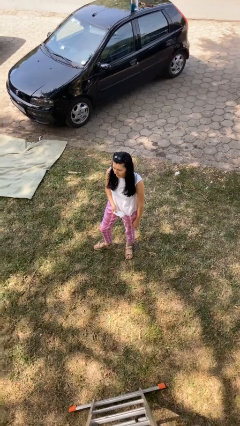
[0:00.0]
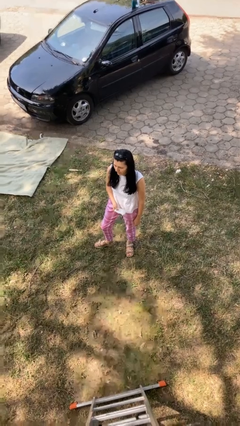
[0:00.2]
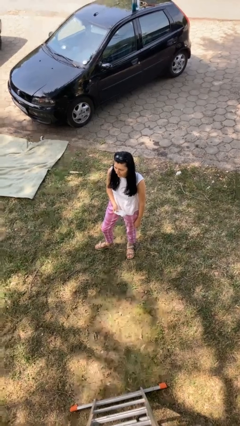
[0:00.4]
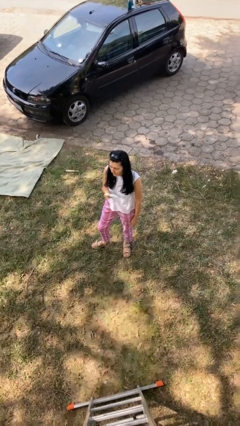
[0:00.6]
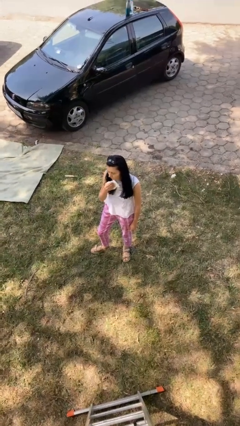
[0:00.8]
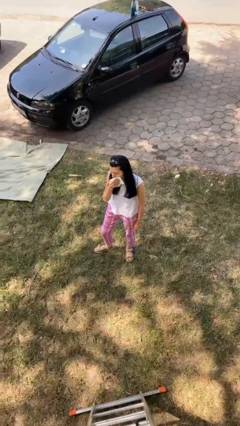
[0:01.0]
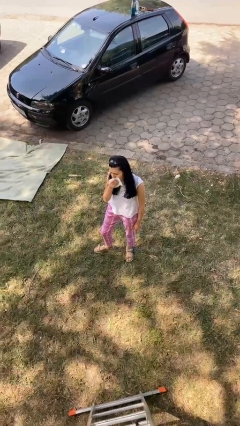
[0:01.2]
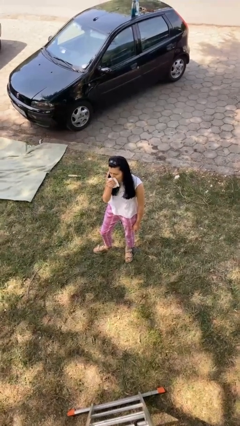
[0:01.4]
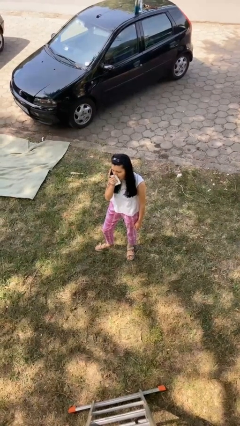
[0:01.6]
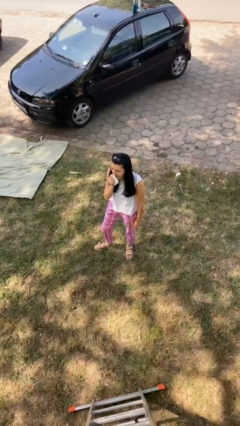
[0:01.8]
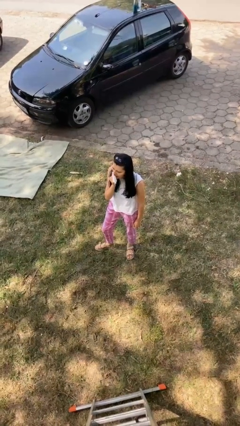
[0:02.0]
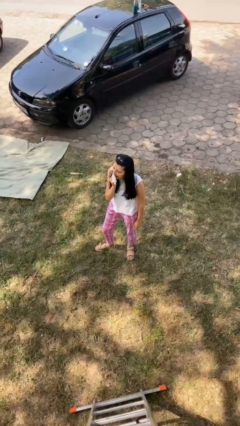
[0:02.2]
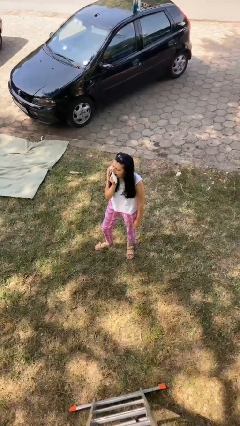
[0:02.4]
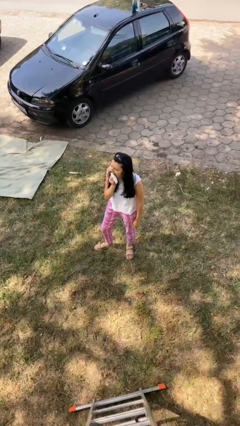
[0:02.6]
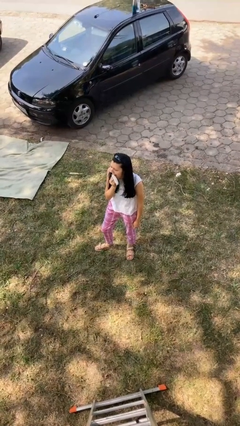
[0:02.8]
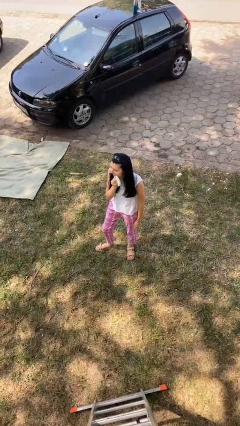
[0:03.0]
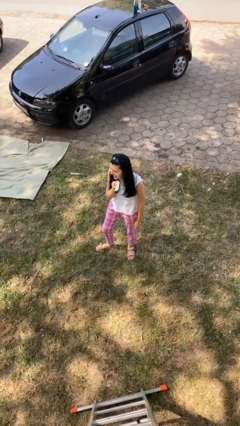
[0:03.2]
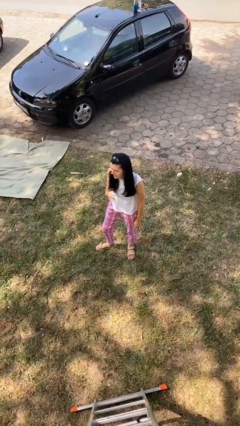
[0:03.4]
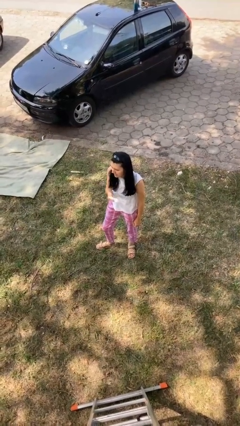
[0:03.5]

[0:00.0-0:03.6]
person wipes mouth with napkin

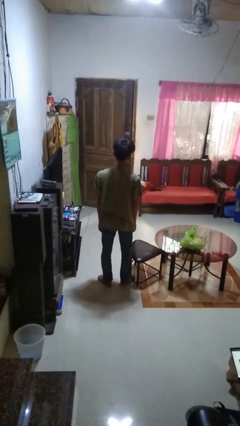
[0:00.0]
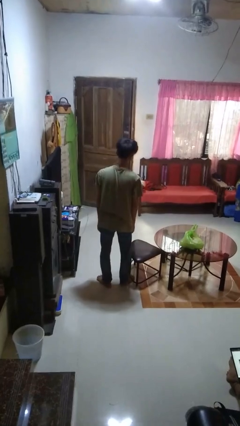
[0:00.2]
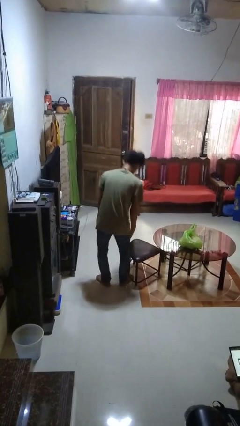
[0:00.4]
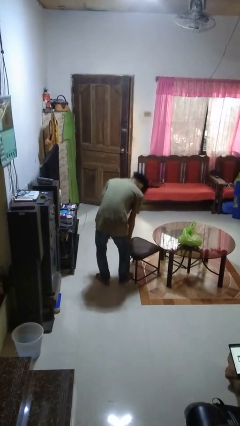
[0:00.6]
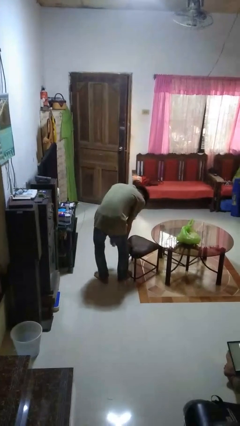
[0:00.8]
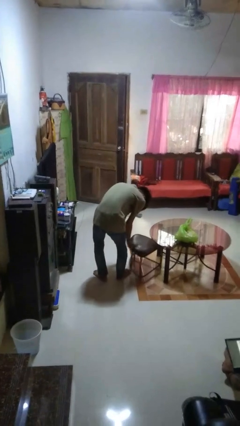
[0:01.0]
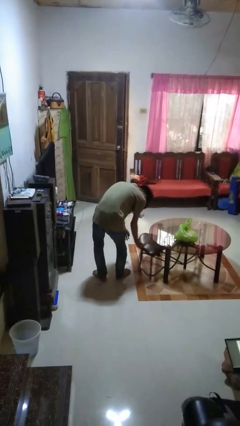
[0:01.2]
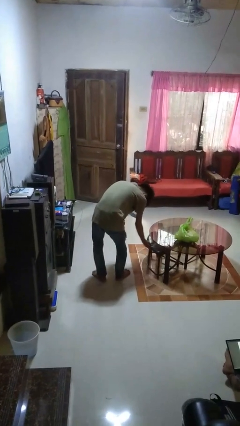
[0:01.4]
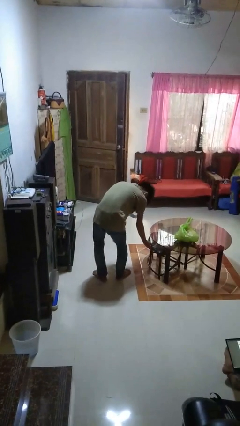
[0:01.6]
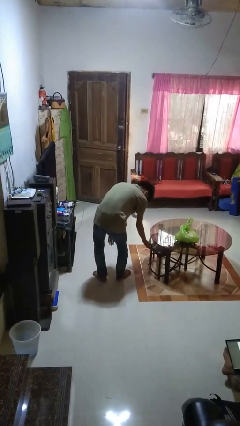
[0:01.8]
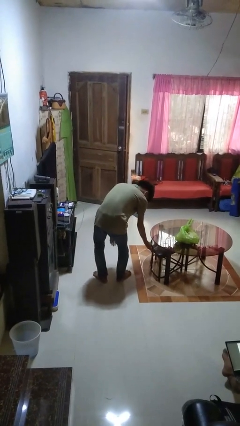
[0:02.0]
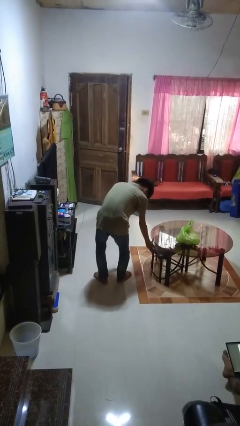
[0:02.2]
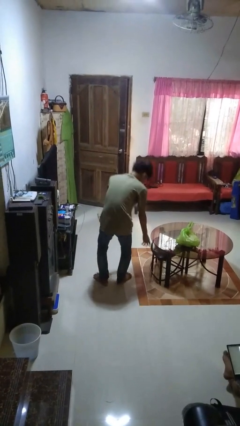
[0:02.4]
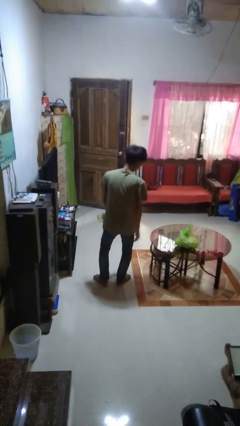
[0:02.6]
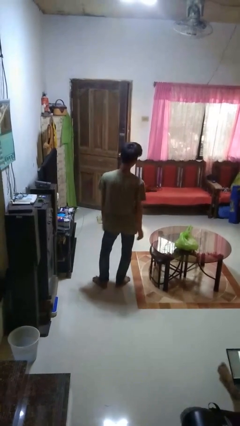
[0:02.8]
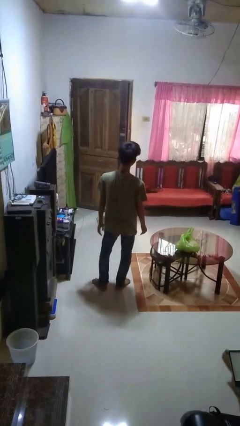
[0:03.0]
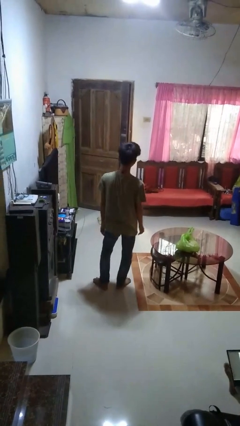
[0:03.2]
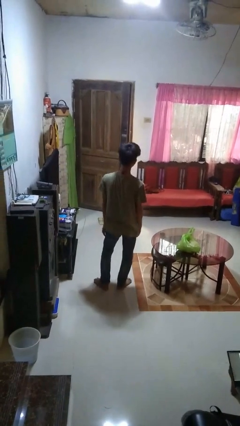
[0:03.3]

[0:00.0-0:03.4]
person pushes in chair

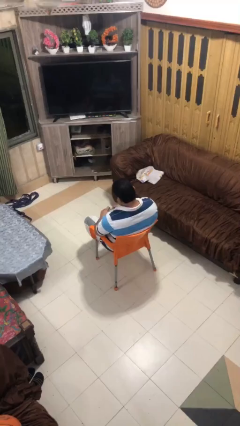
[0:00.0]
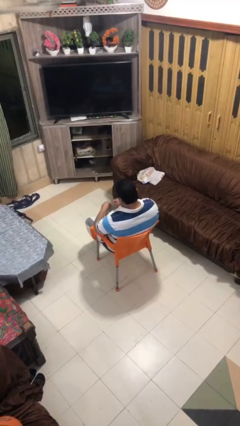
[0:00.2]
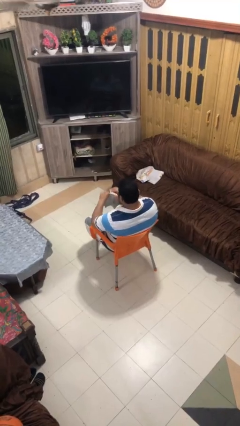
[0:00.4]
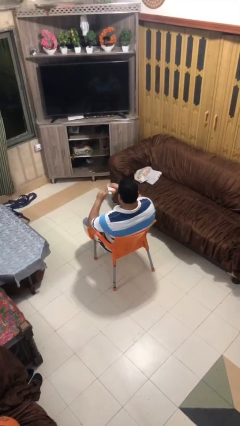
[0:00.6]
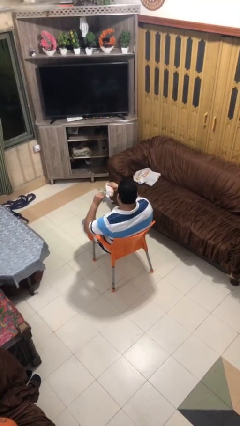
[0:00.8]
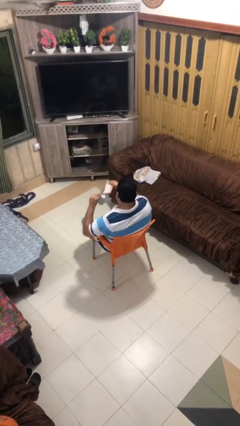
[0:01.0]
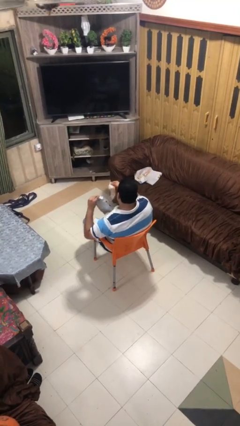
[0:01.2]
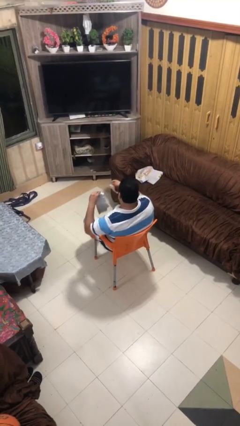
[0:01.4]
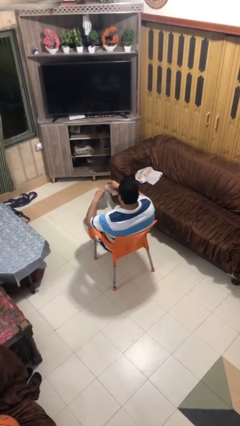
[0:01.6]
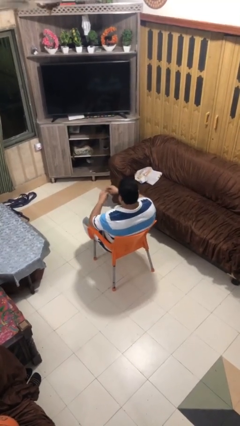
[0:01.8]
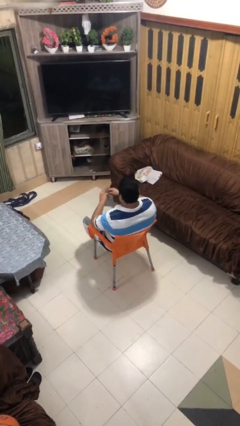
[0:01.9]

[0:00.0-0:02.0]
person tears paper

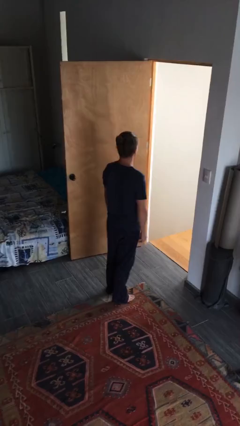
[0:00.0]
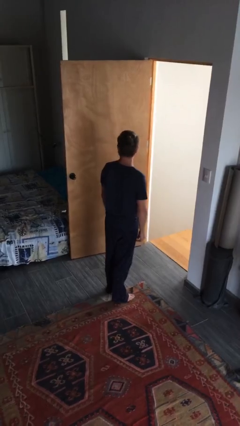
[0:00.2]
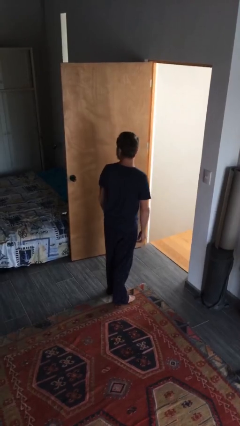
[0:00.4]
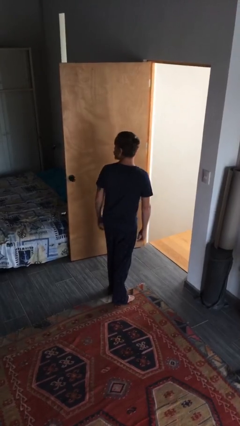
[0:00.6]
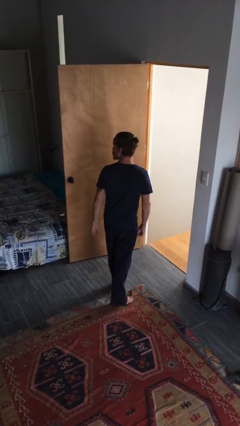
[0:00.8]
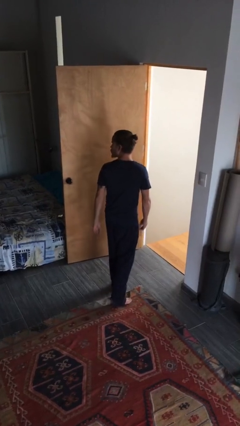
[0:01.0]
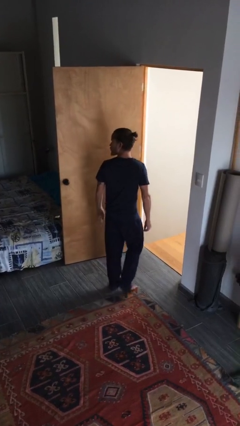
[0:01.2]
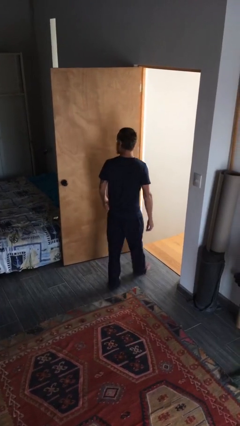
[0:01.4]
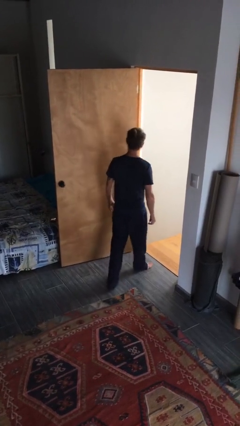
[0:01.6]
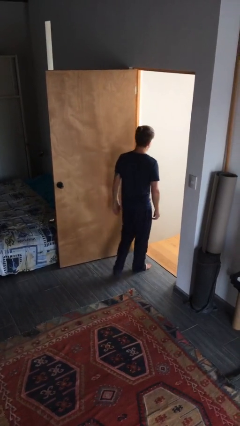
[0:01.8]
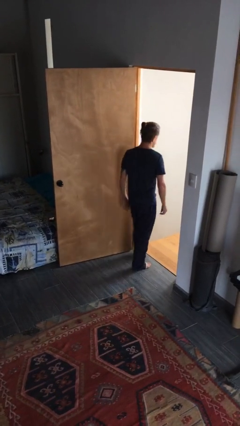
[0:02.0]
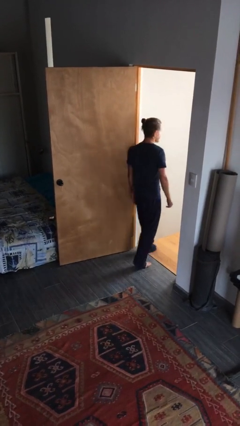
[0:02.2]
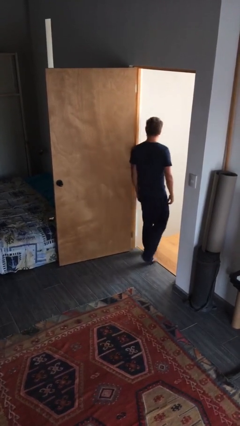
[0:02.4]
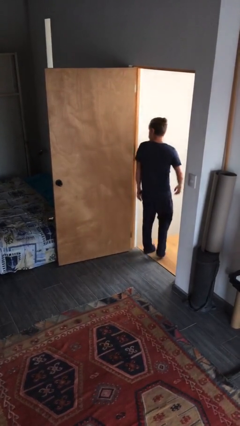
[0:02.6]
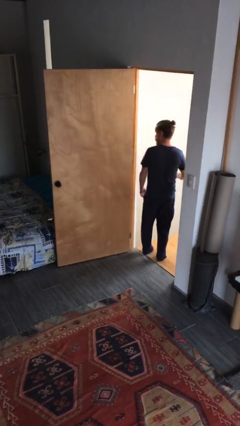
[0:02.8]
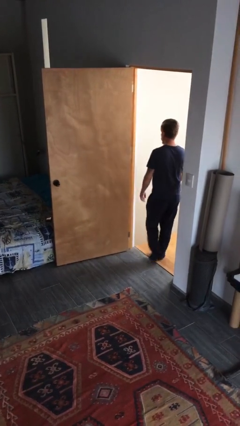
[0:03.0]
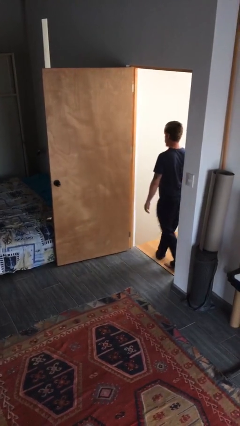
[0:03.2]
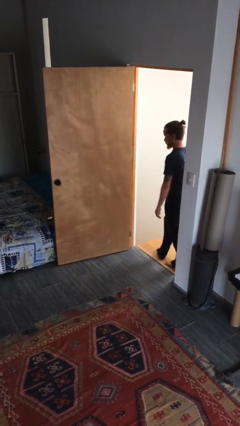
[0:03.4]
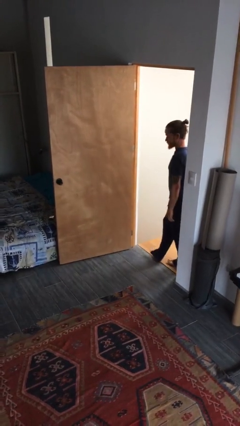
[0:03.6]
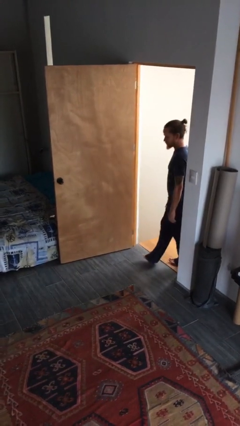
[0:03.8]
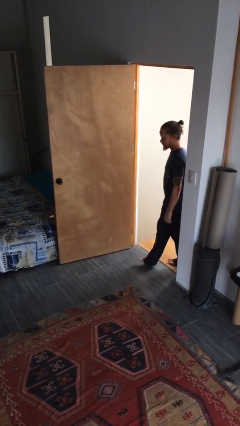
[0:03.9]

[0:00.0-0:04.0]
person bumps into wall

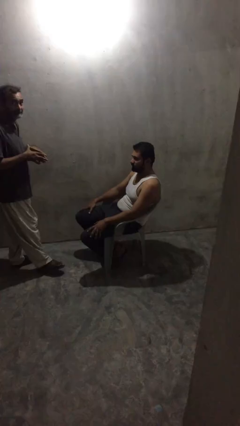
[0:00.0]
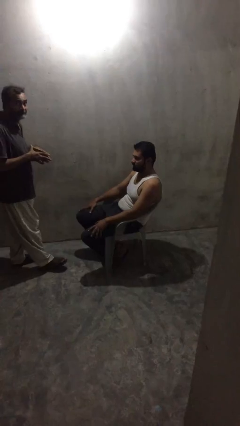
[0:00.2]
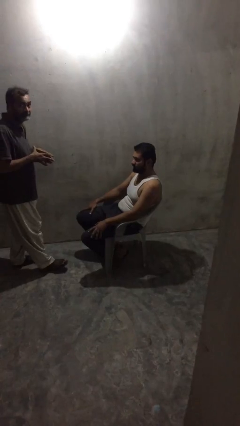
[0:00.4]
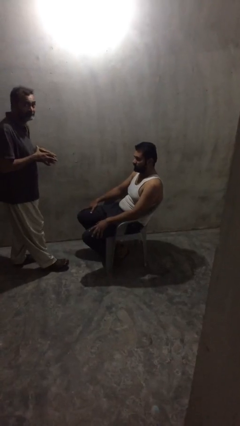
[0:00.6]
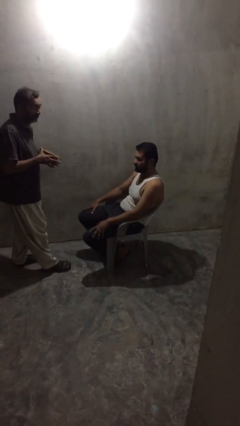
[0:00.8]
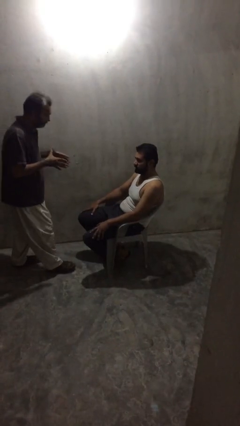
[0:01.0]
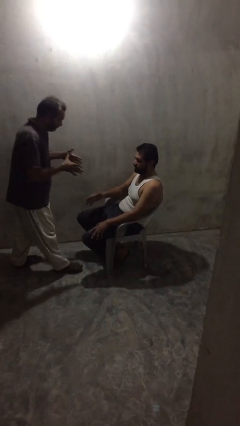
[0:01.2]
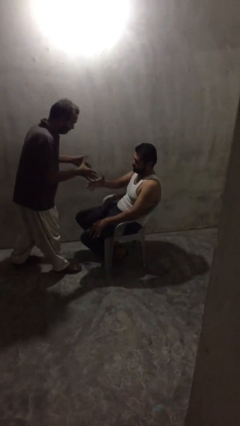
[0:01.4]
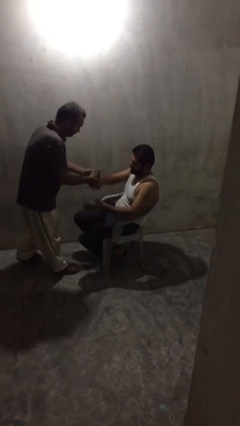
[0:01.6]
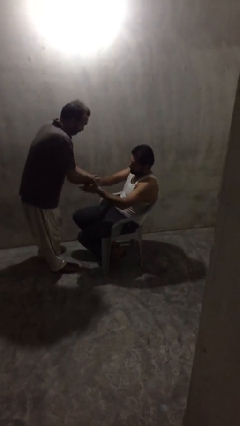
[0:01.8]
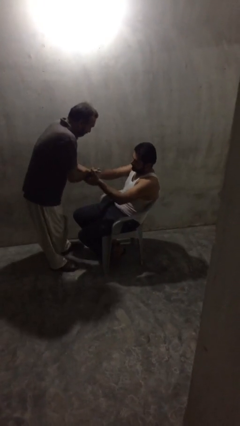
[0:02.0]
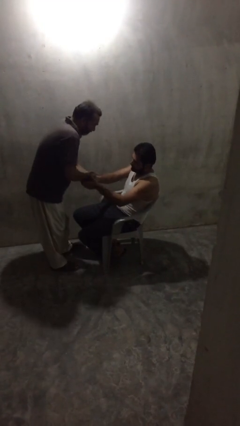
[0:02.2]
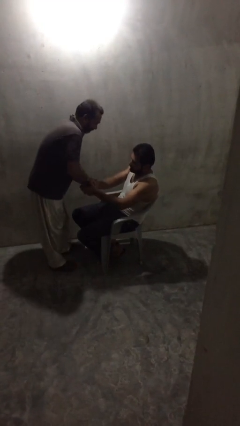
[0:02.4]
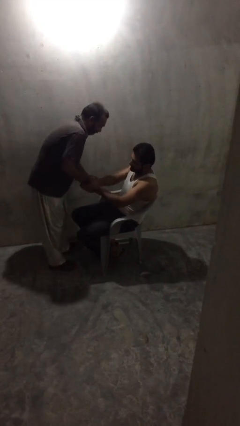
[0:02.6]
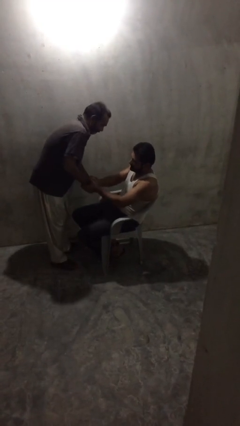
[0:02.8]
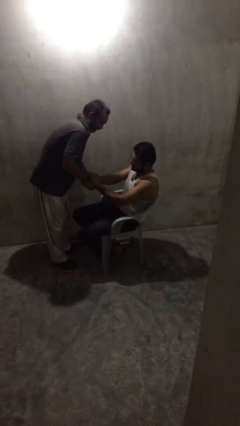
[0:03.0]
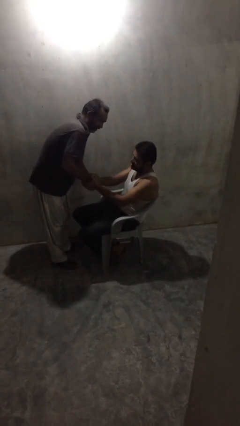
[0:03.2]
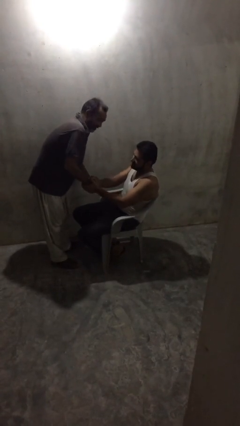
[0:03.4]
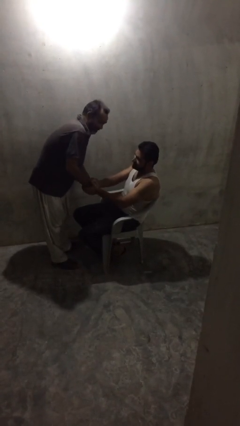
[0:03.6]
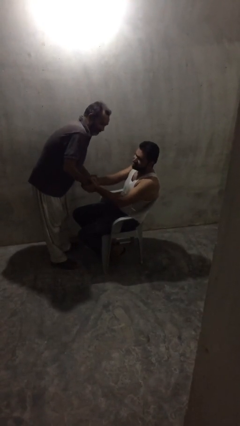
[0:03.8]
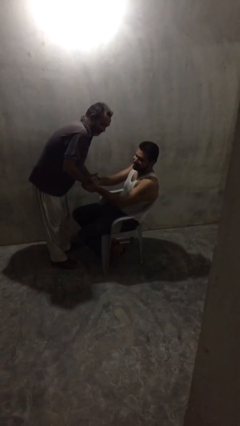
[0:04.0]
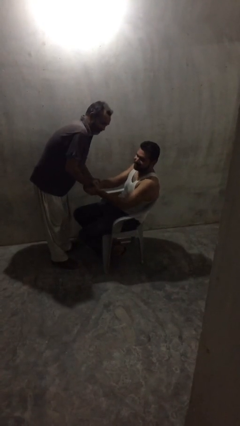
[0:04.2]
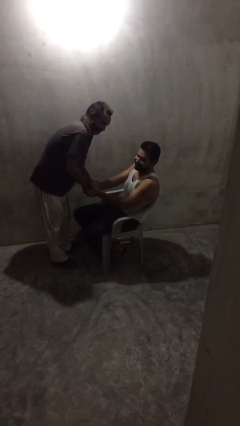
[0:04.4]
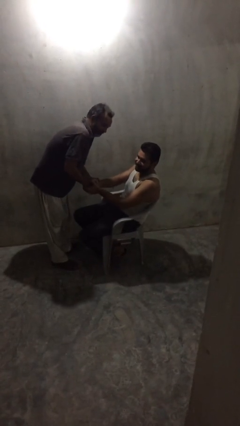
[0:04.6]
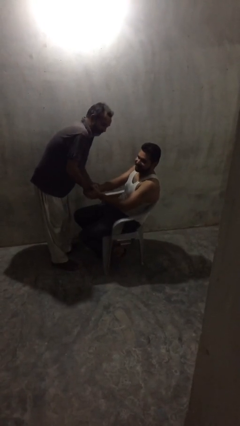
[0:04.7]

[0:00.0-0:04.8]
person shakes hand
